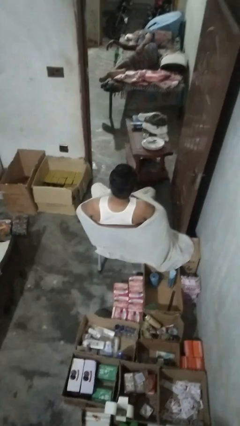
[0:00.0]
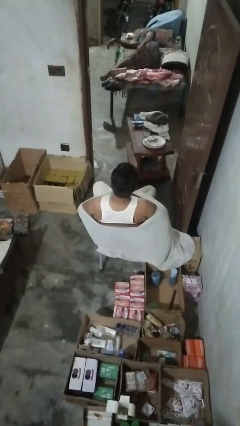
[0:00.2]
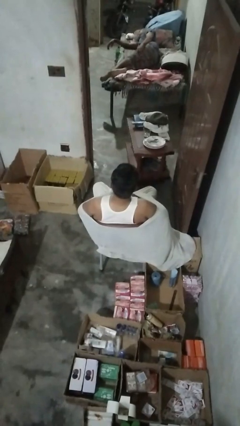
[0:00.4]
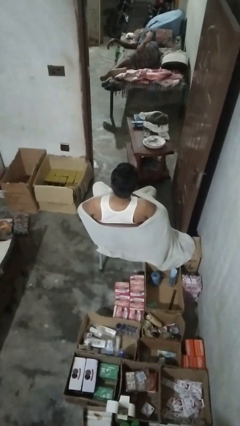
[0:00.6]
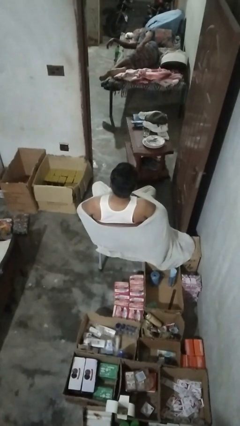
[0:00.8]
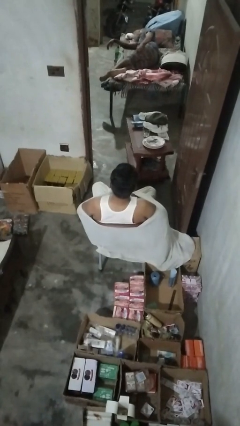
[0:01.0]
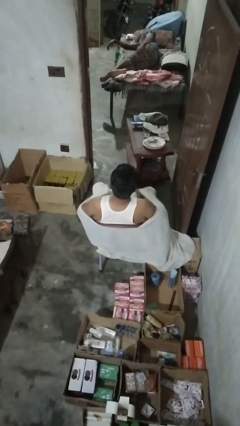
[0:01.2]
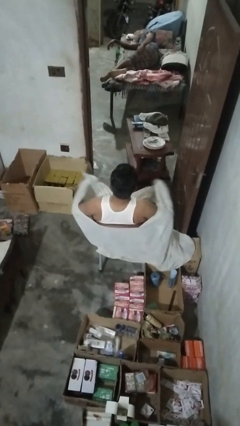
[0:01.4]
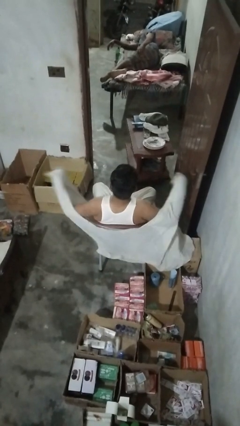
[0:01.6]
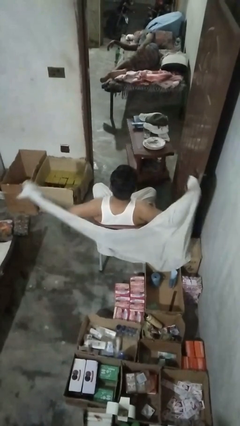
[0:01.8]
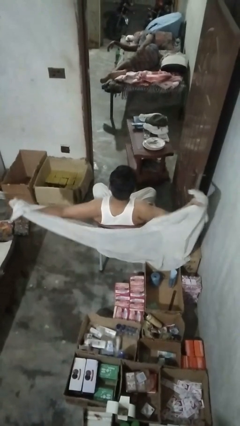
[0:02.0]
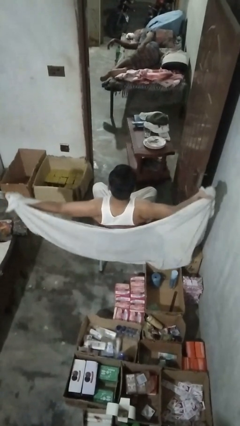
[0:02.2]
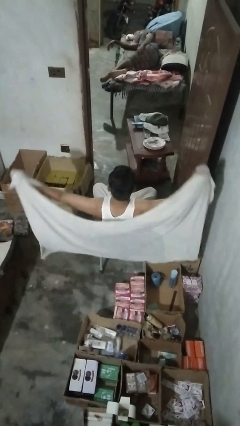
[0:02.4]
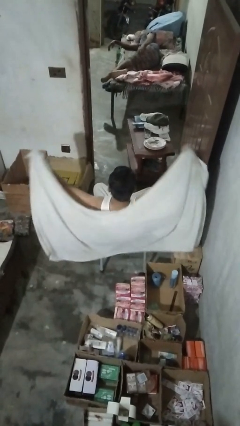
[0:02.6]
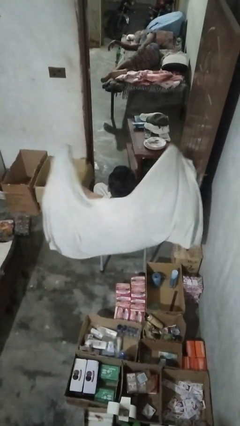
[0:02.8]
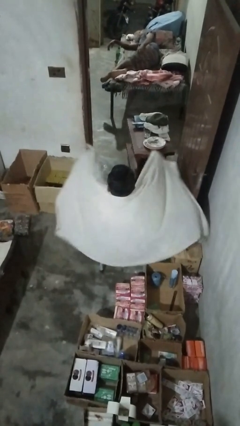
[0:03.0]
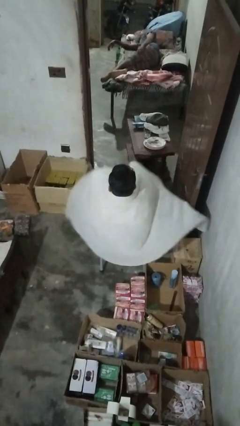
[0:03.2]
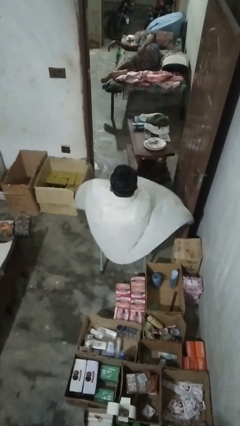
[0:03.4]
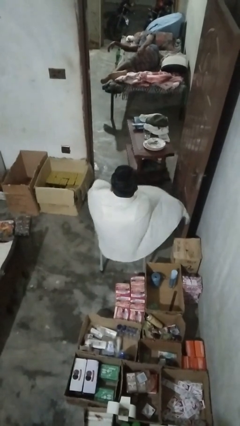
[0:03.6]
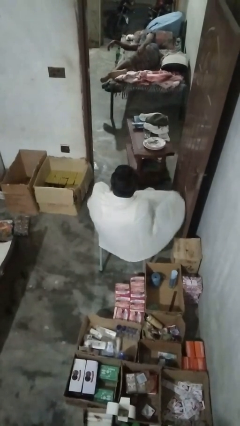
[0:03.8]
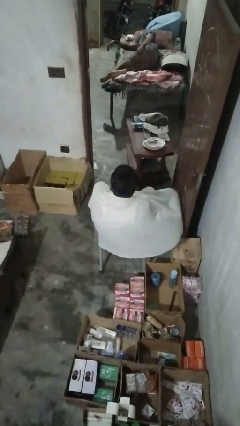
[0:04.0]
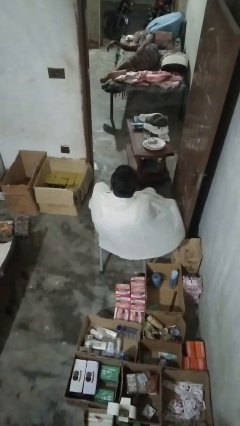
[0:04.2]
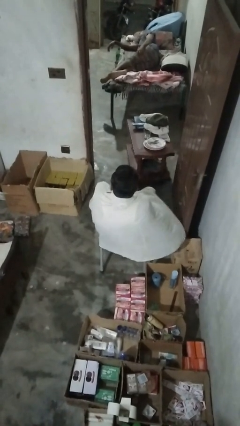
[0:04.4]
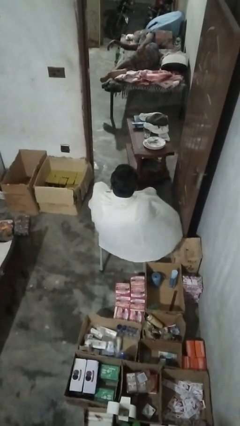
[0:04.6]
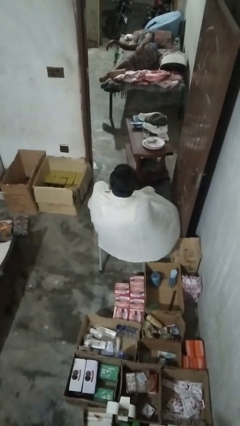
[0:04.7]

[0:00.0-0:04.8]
person covers with blanket

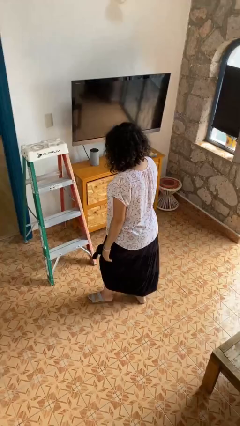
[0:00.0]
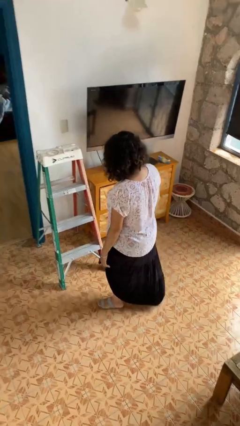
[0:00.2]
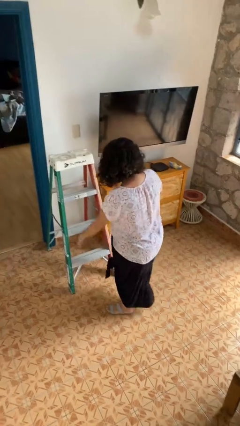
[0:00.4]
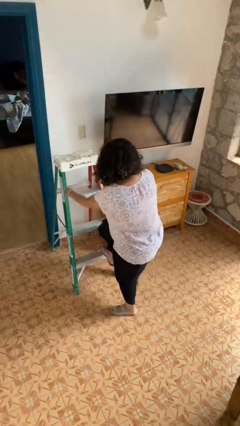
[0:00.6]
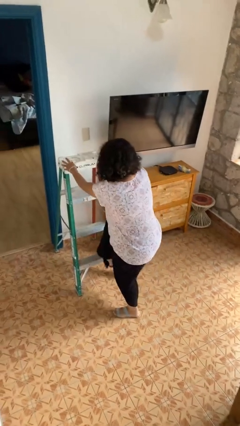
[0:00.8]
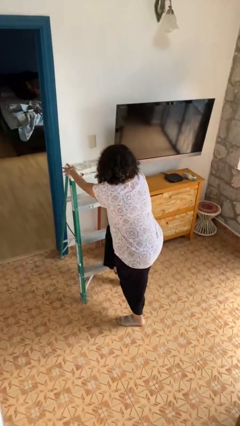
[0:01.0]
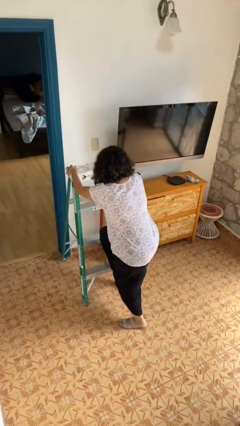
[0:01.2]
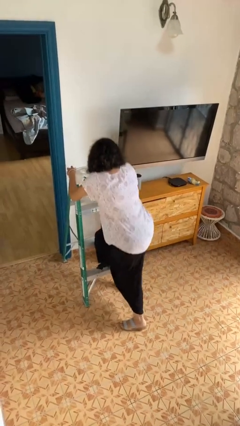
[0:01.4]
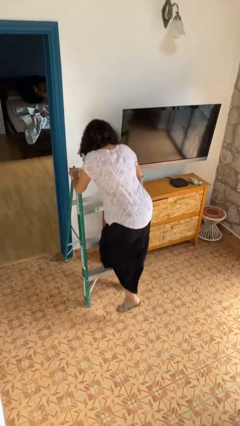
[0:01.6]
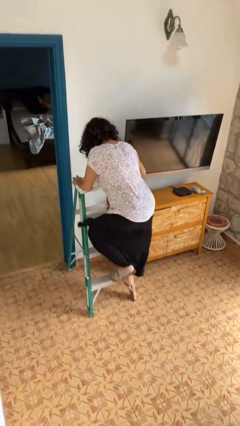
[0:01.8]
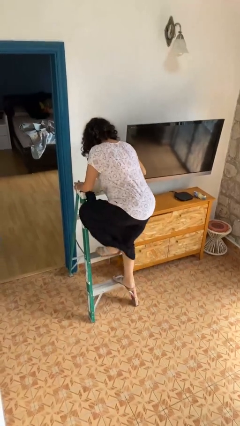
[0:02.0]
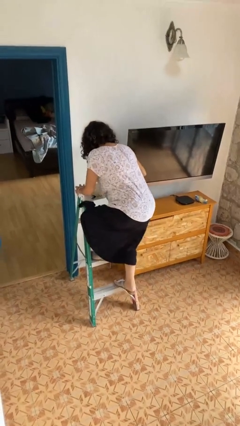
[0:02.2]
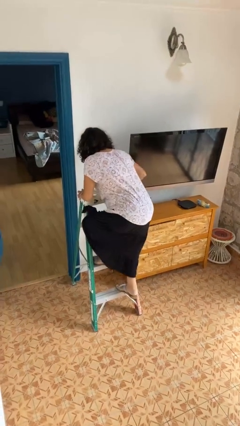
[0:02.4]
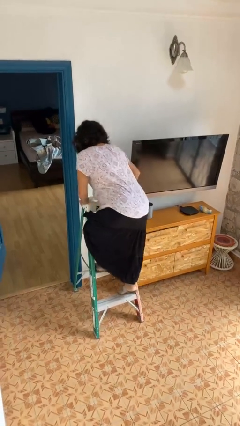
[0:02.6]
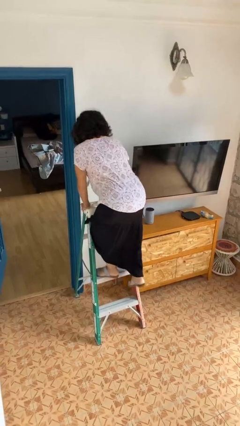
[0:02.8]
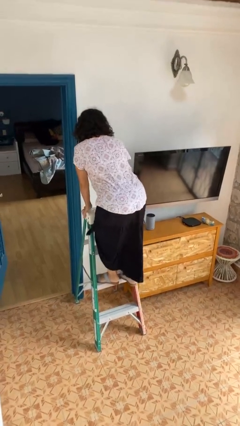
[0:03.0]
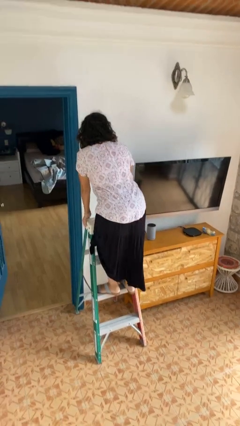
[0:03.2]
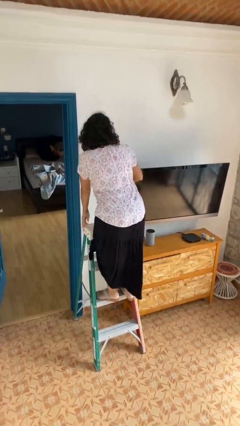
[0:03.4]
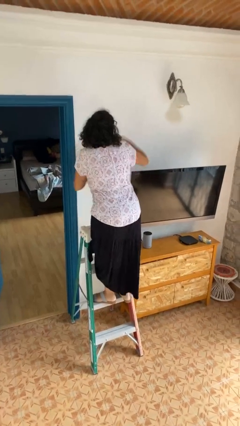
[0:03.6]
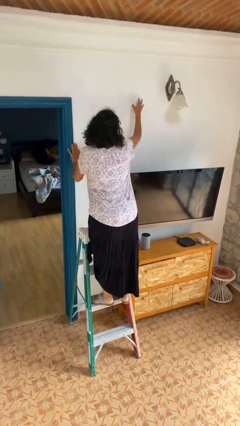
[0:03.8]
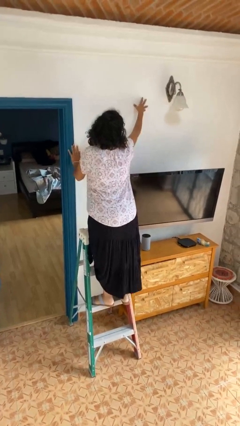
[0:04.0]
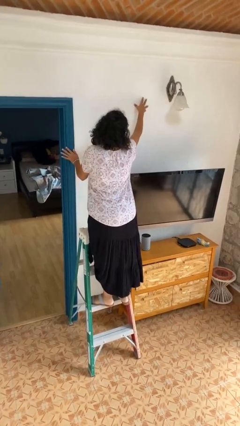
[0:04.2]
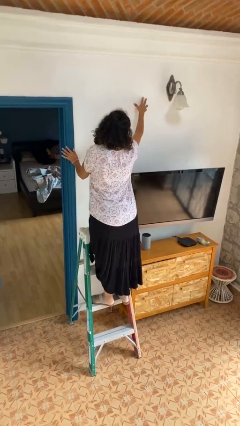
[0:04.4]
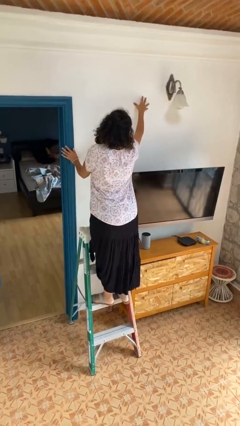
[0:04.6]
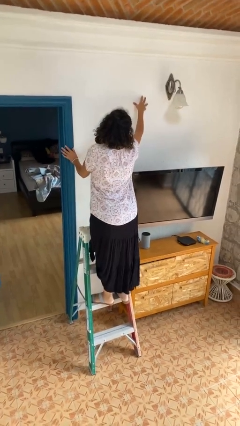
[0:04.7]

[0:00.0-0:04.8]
person climbs up ladder

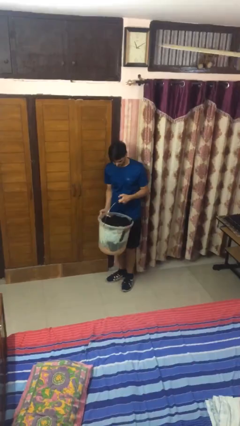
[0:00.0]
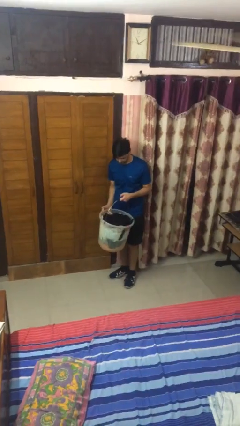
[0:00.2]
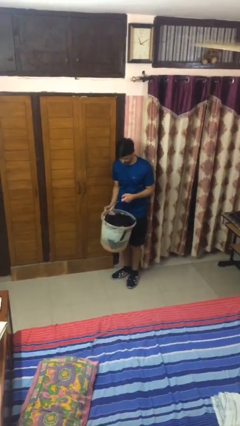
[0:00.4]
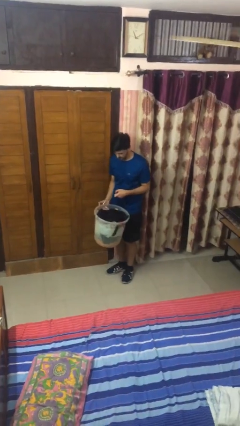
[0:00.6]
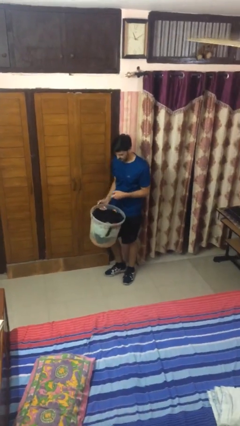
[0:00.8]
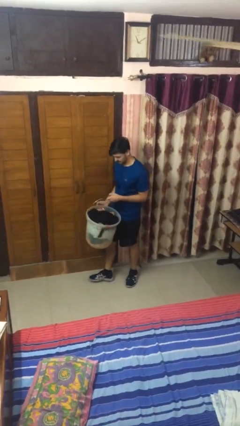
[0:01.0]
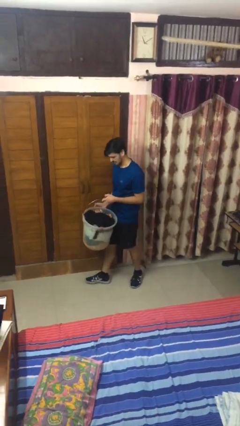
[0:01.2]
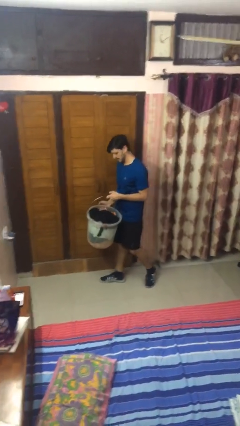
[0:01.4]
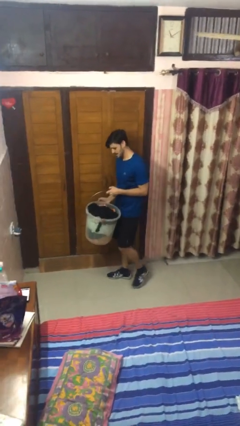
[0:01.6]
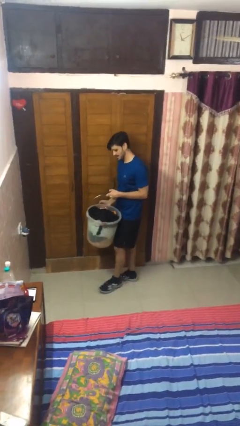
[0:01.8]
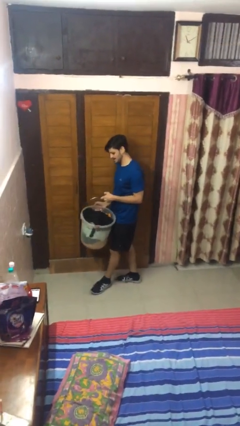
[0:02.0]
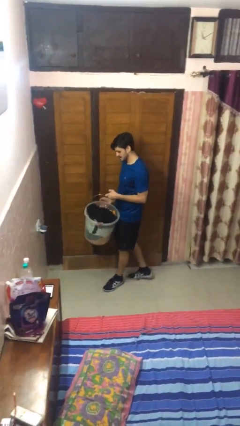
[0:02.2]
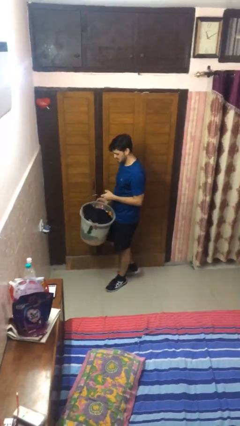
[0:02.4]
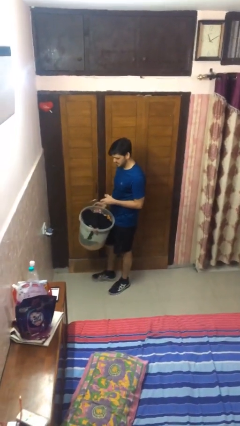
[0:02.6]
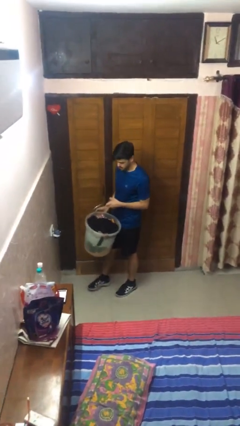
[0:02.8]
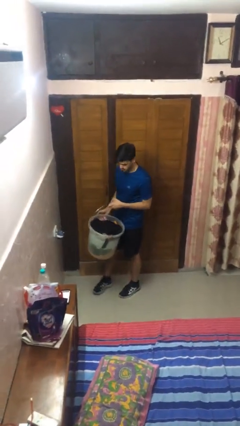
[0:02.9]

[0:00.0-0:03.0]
person carries laundry basket

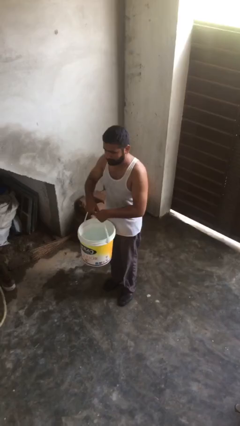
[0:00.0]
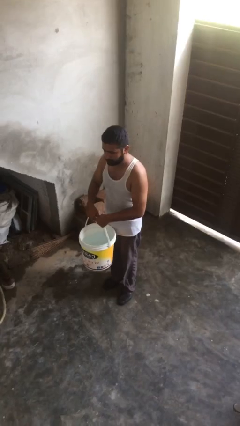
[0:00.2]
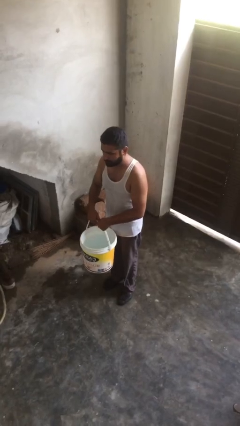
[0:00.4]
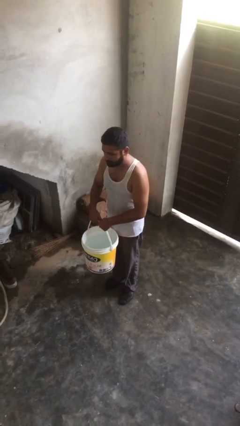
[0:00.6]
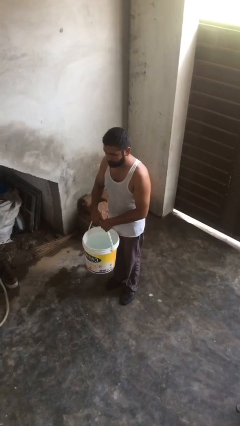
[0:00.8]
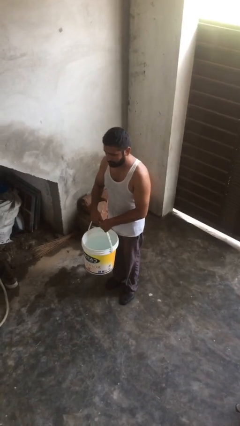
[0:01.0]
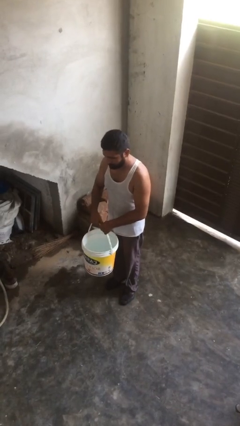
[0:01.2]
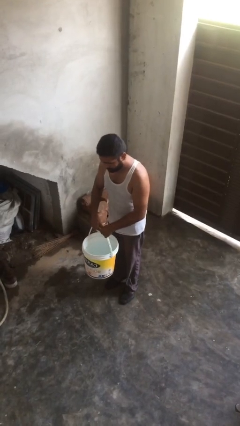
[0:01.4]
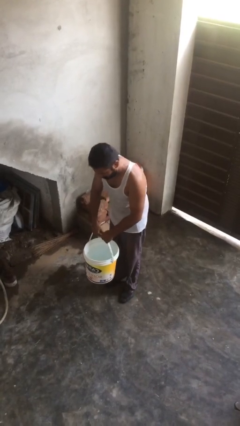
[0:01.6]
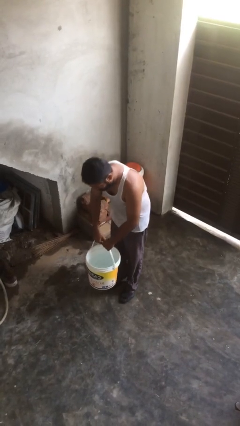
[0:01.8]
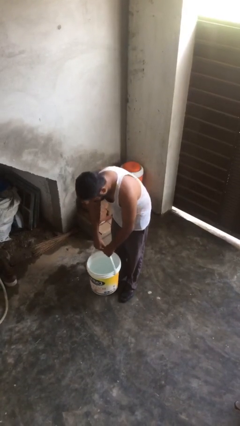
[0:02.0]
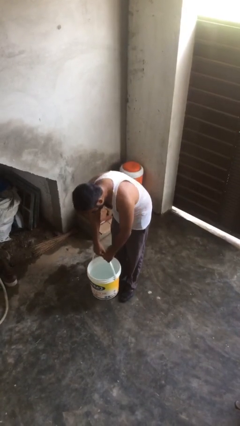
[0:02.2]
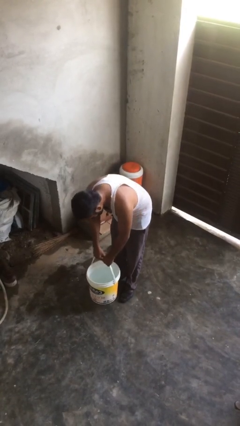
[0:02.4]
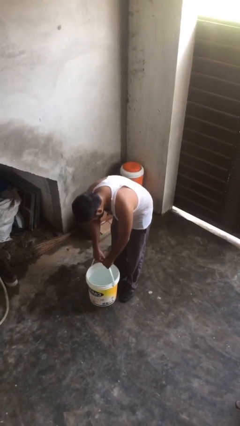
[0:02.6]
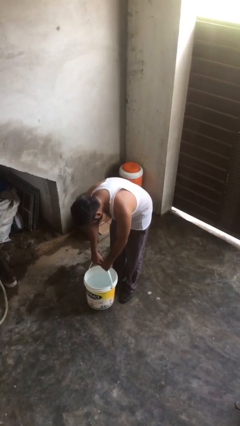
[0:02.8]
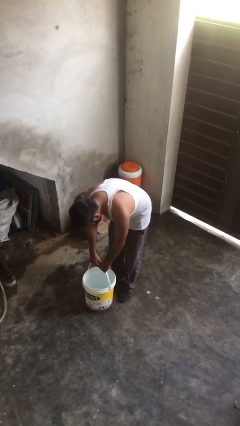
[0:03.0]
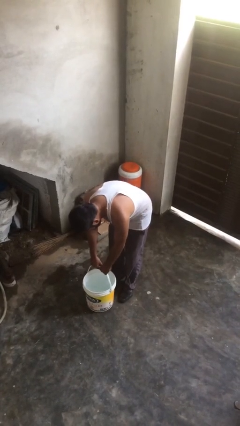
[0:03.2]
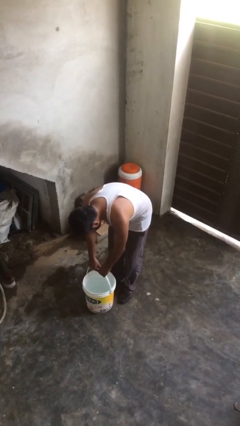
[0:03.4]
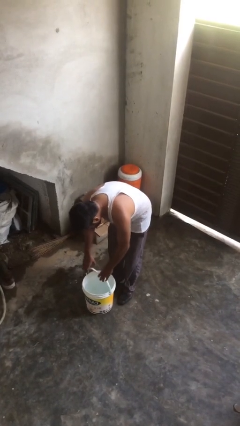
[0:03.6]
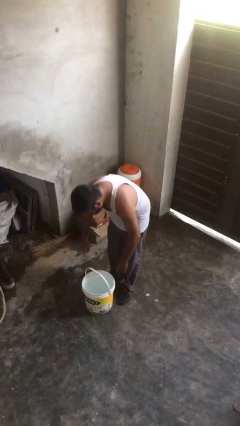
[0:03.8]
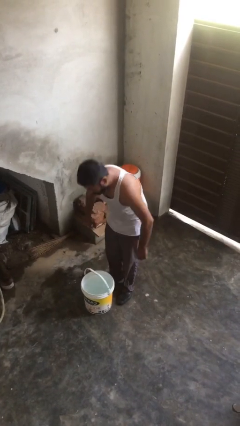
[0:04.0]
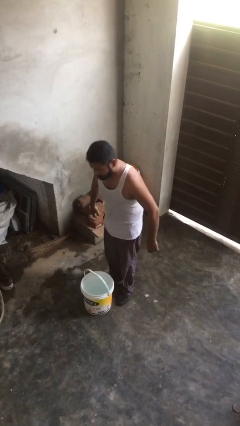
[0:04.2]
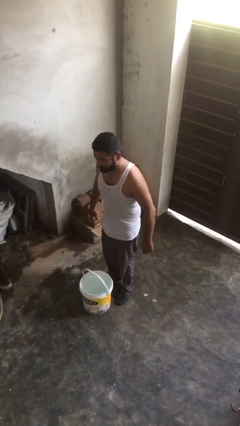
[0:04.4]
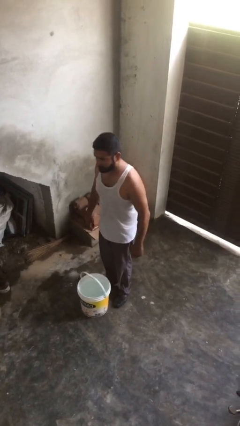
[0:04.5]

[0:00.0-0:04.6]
person puts down object on floor

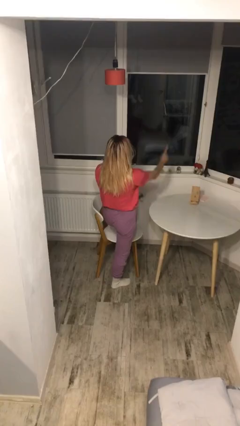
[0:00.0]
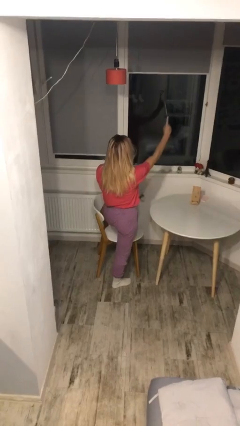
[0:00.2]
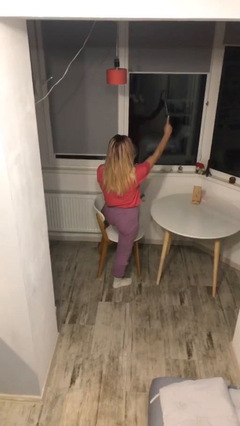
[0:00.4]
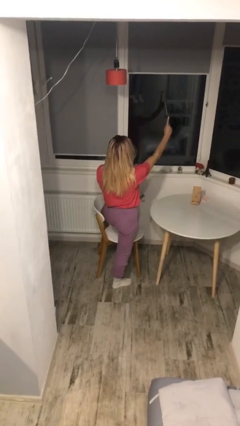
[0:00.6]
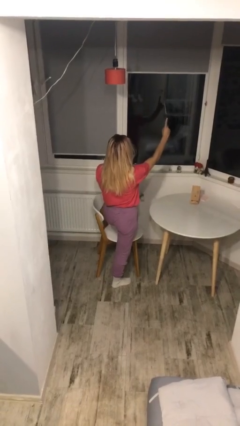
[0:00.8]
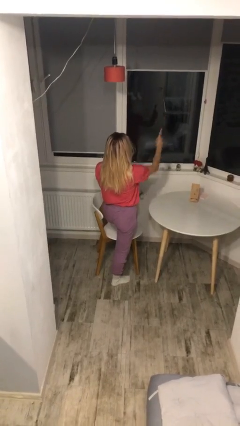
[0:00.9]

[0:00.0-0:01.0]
person gestures number one
